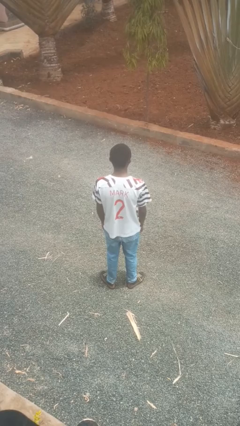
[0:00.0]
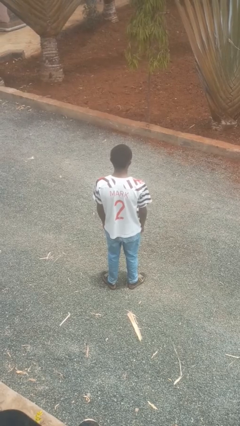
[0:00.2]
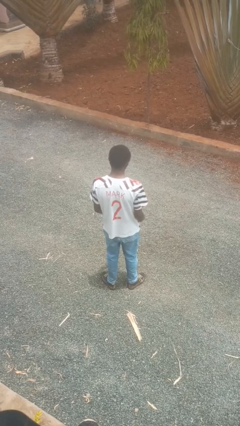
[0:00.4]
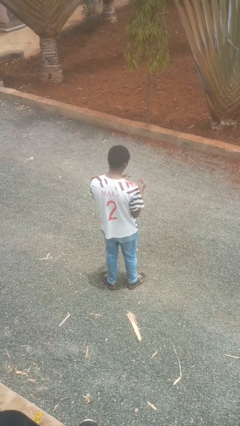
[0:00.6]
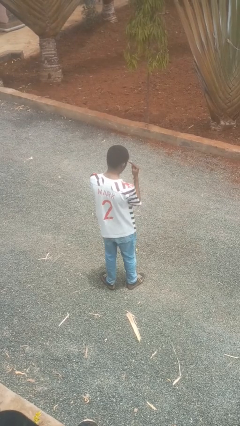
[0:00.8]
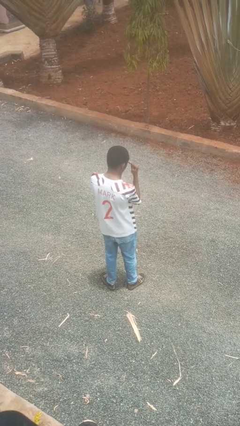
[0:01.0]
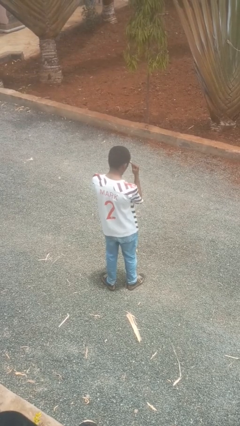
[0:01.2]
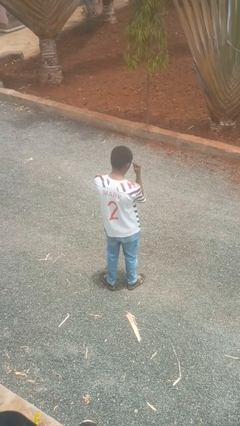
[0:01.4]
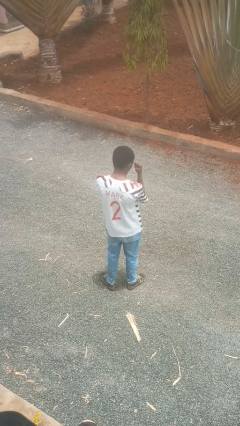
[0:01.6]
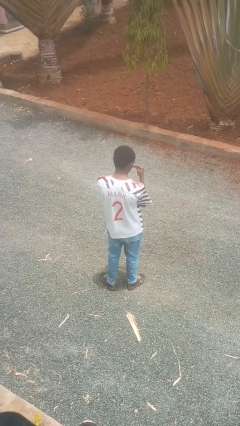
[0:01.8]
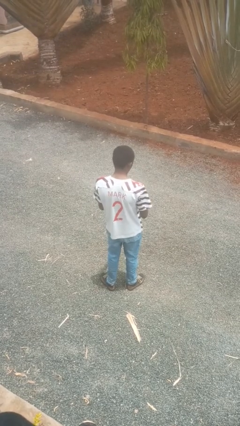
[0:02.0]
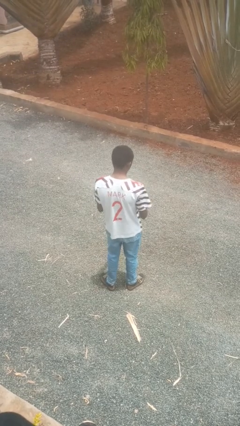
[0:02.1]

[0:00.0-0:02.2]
person gestures watch closely

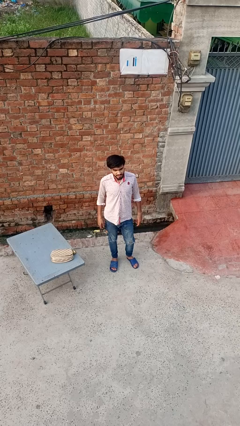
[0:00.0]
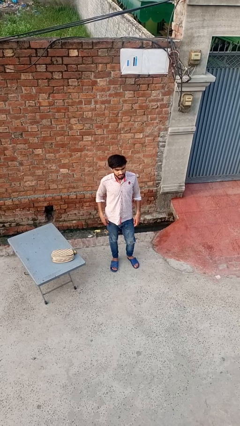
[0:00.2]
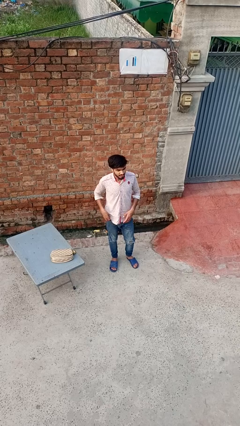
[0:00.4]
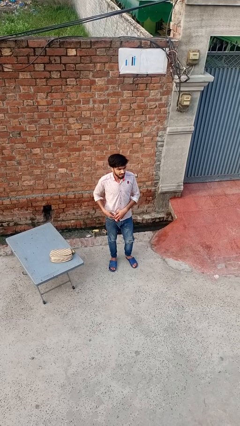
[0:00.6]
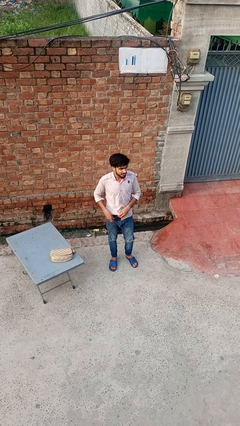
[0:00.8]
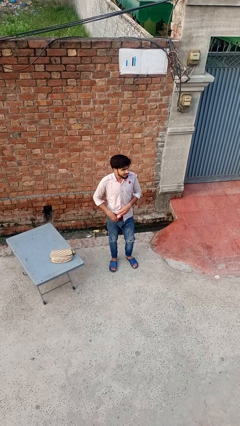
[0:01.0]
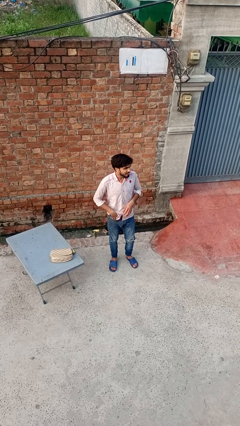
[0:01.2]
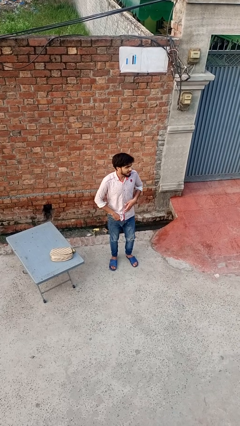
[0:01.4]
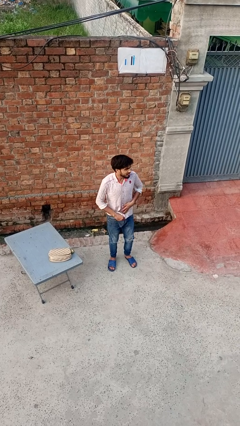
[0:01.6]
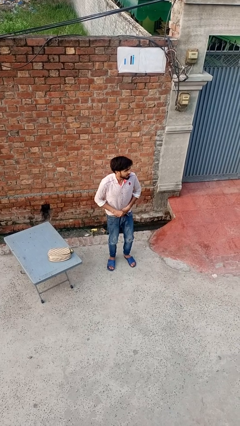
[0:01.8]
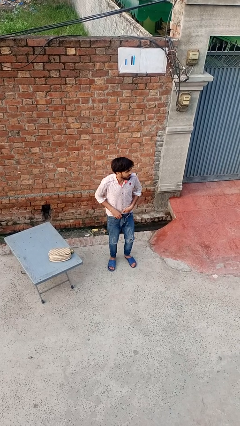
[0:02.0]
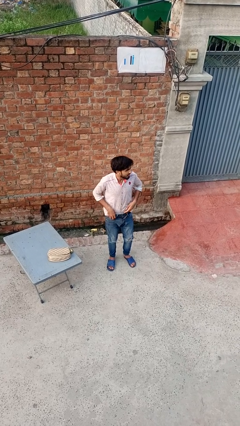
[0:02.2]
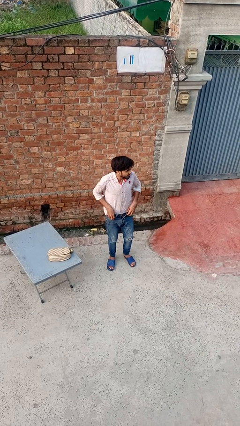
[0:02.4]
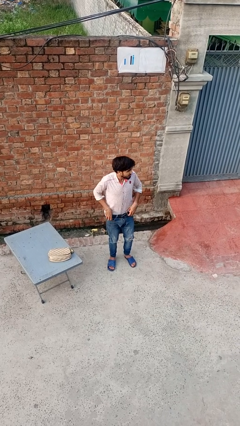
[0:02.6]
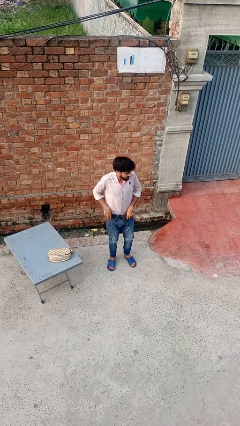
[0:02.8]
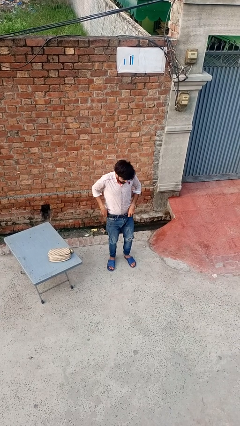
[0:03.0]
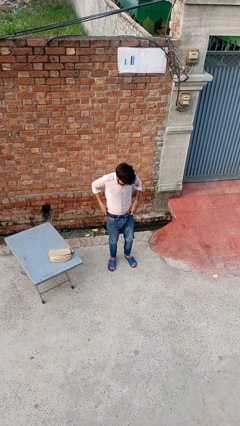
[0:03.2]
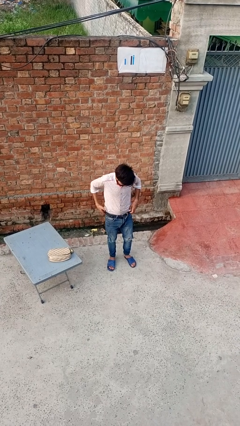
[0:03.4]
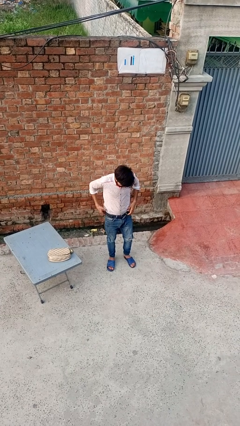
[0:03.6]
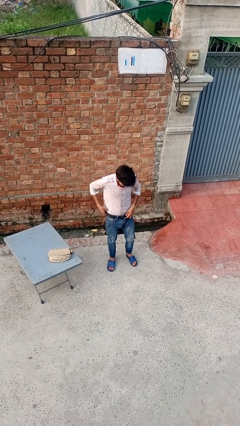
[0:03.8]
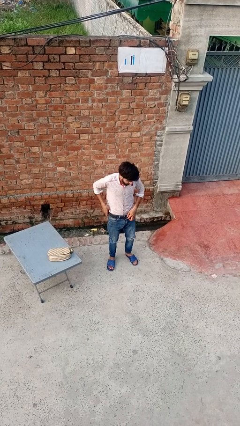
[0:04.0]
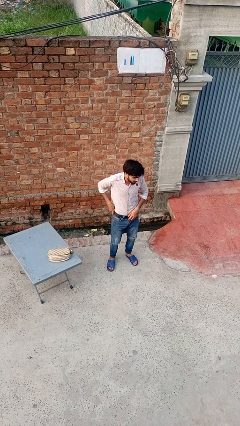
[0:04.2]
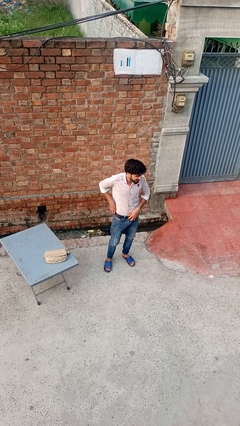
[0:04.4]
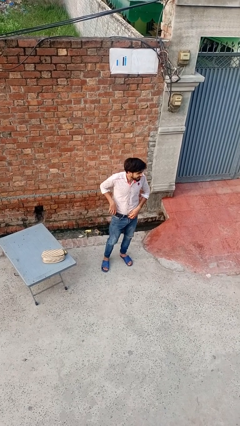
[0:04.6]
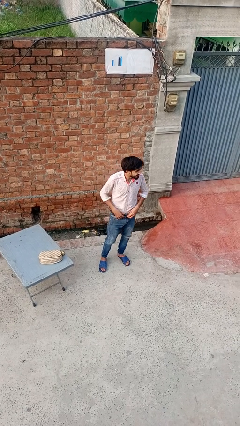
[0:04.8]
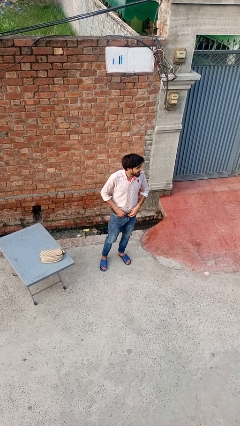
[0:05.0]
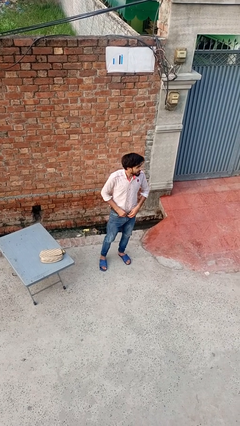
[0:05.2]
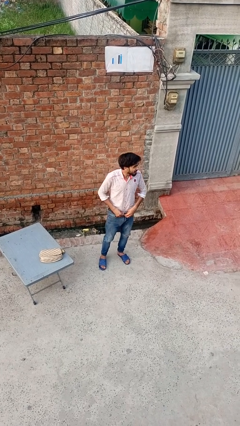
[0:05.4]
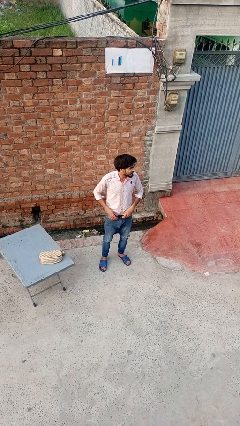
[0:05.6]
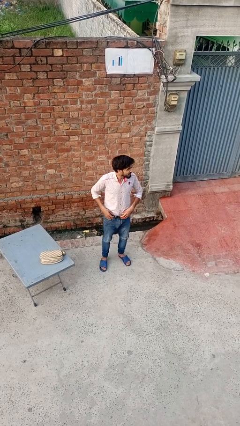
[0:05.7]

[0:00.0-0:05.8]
person tucks in shirt

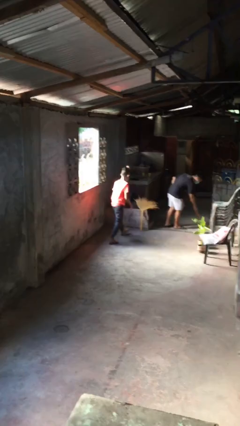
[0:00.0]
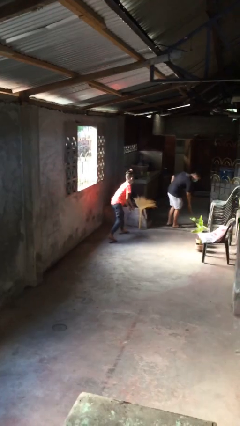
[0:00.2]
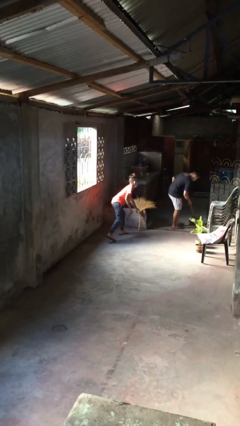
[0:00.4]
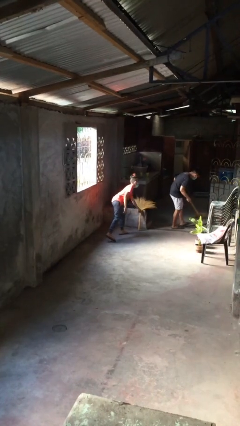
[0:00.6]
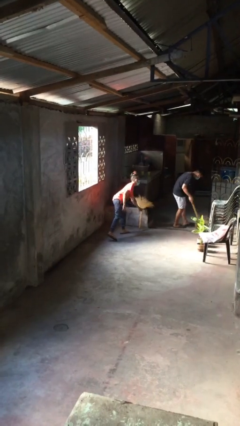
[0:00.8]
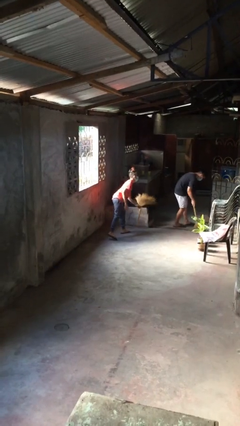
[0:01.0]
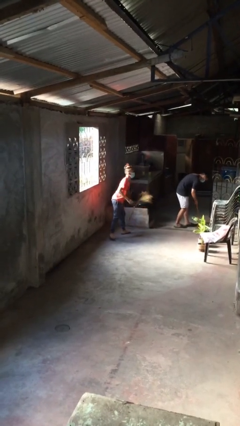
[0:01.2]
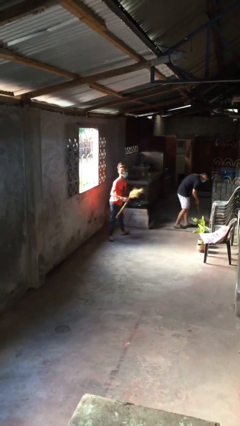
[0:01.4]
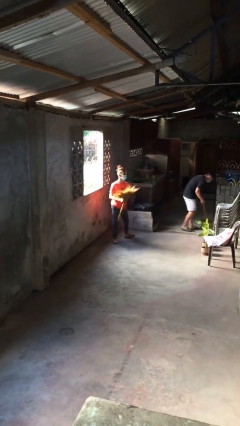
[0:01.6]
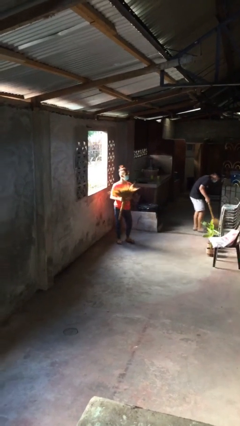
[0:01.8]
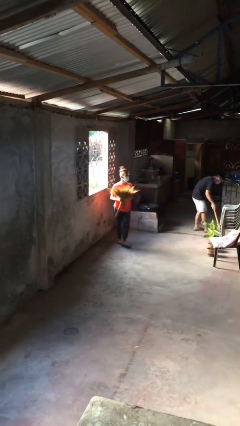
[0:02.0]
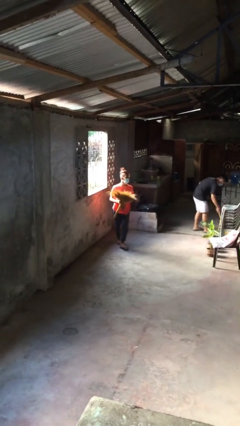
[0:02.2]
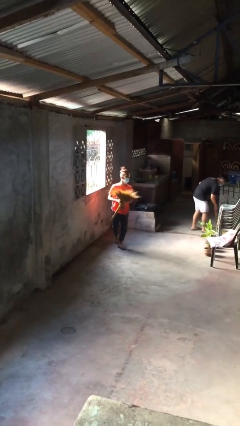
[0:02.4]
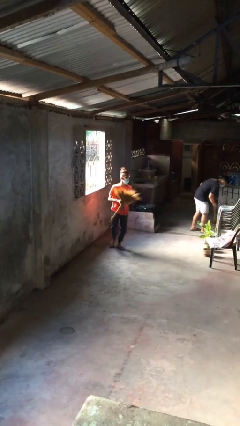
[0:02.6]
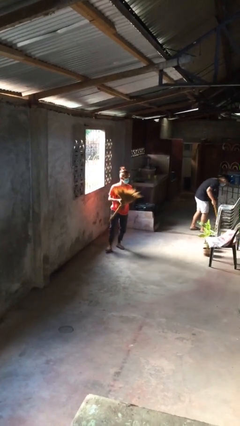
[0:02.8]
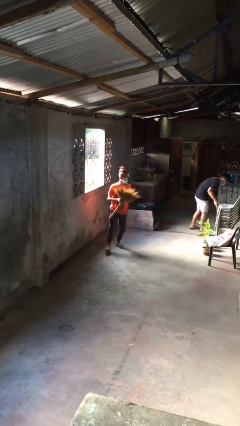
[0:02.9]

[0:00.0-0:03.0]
person steals object from person

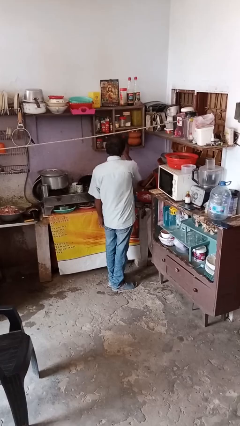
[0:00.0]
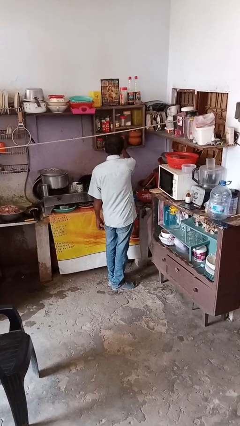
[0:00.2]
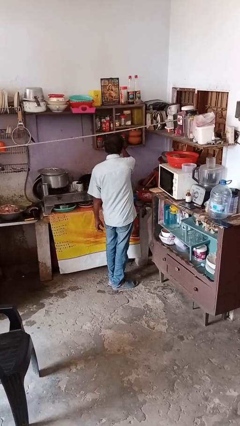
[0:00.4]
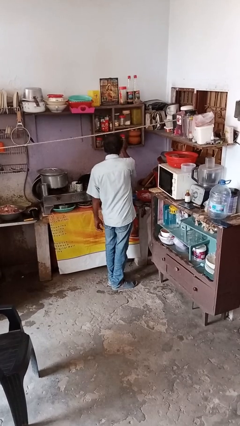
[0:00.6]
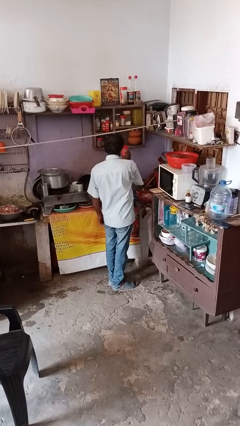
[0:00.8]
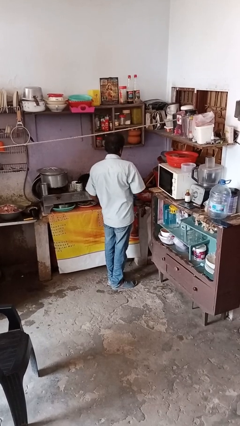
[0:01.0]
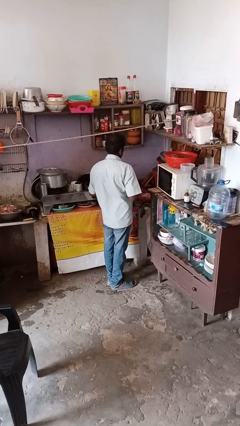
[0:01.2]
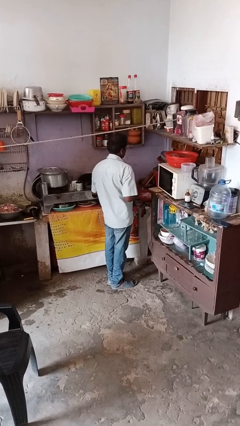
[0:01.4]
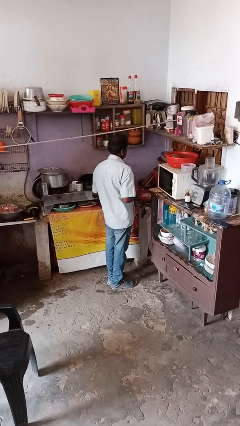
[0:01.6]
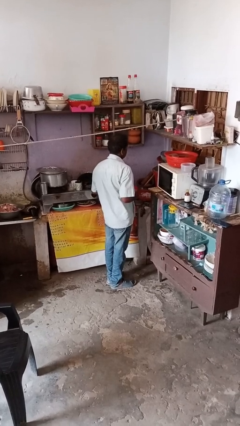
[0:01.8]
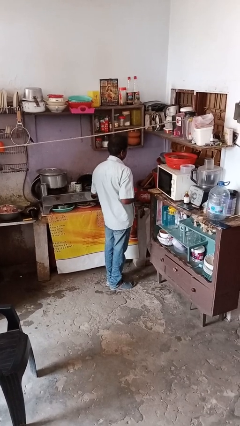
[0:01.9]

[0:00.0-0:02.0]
person picks up object from shelf

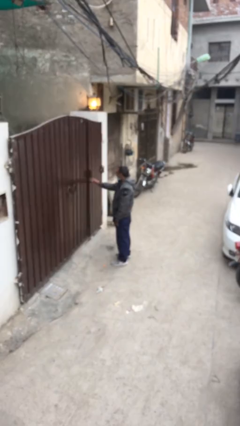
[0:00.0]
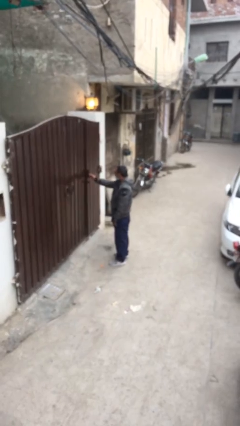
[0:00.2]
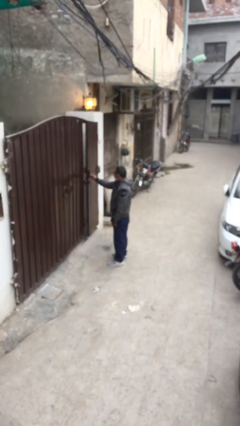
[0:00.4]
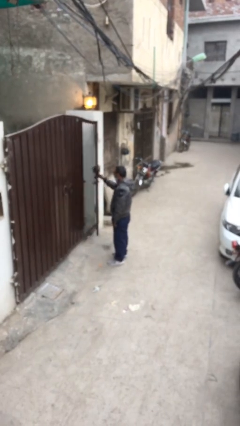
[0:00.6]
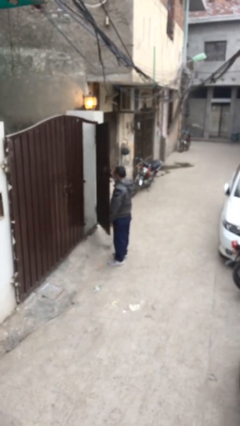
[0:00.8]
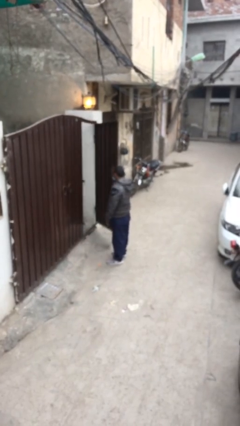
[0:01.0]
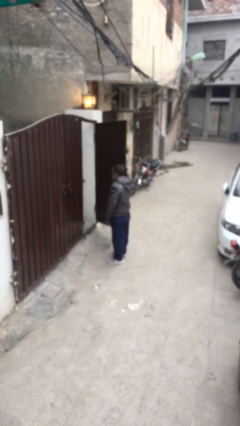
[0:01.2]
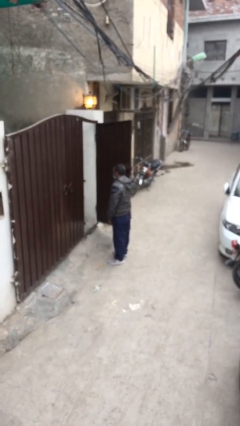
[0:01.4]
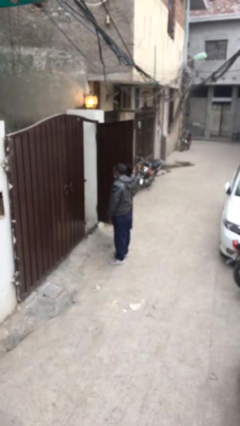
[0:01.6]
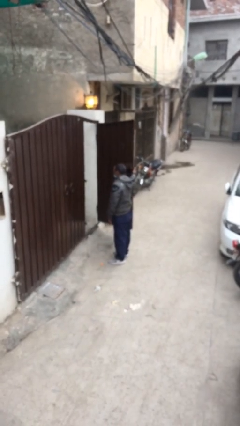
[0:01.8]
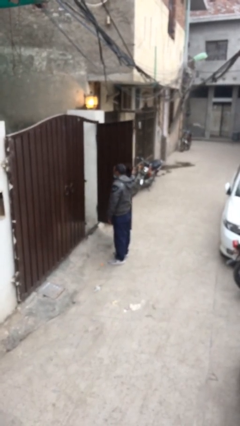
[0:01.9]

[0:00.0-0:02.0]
person opens facility door

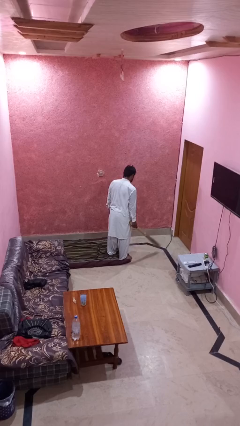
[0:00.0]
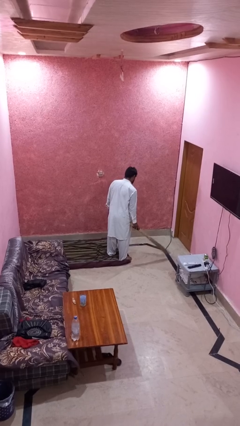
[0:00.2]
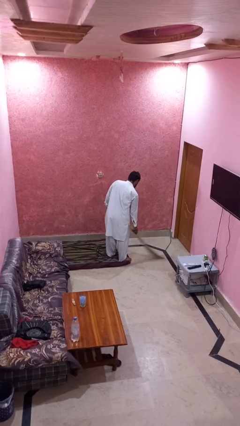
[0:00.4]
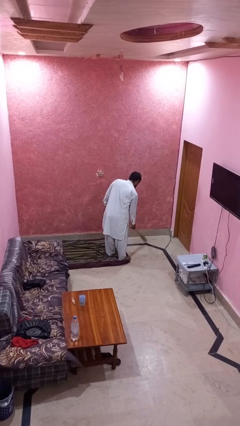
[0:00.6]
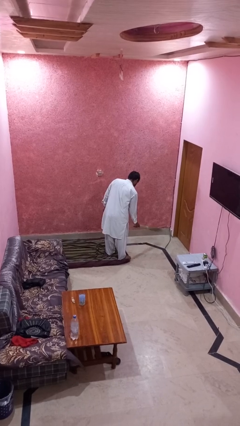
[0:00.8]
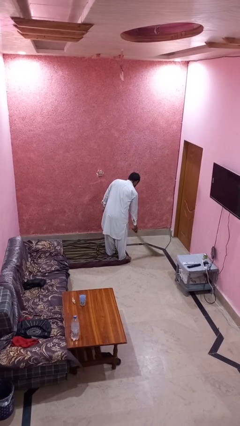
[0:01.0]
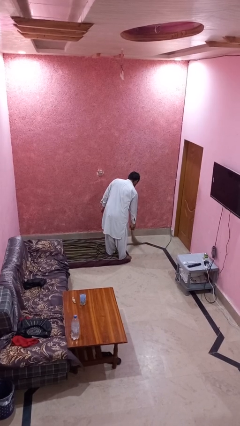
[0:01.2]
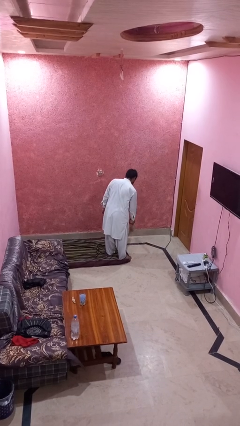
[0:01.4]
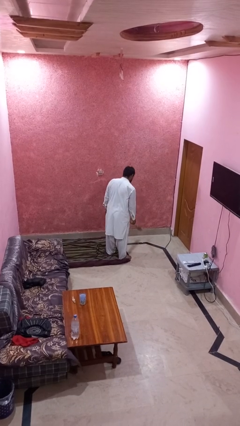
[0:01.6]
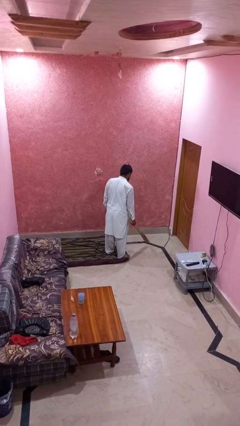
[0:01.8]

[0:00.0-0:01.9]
person sweeps floor

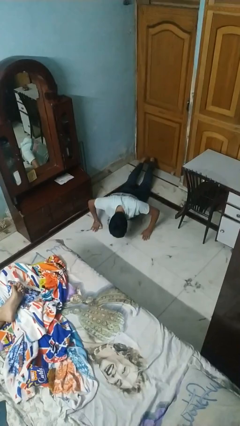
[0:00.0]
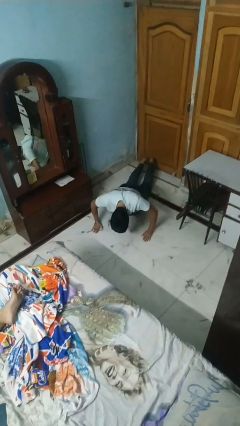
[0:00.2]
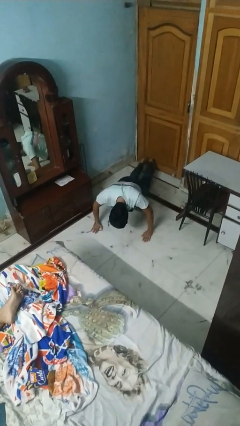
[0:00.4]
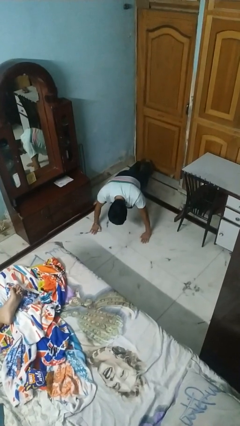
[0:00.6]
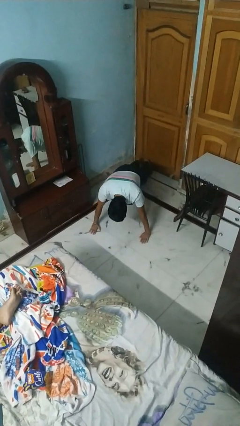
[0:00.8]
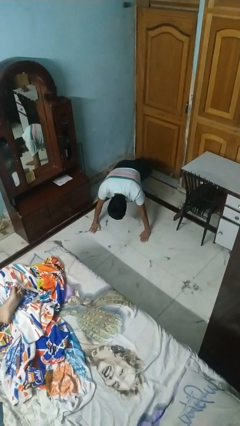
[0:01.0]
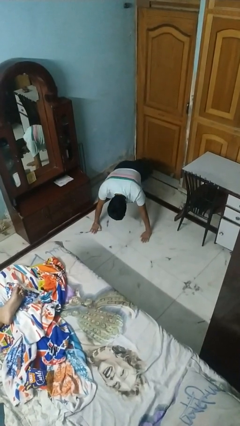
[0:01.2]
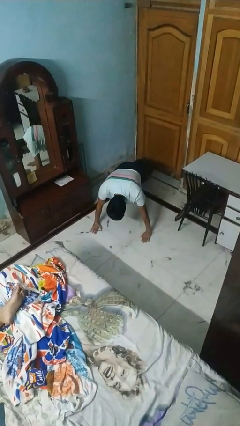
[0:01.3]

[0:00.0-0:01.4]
person exercises with pushup
